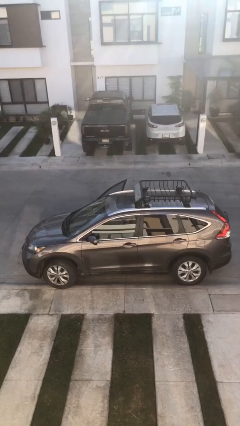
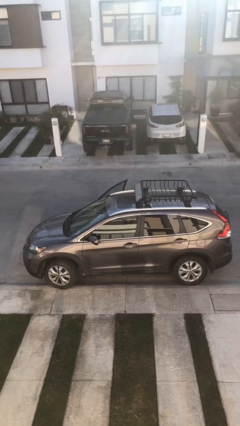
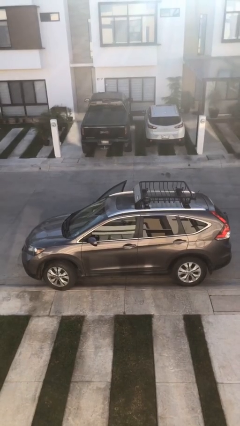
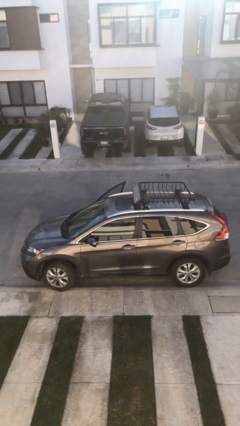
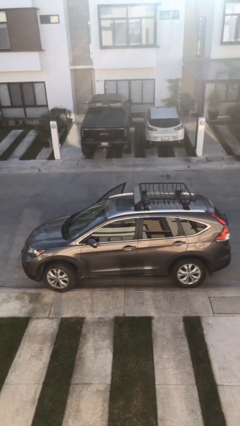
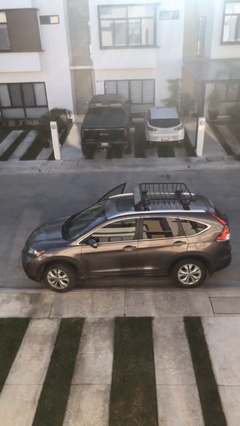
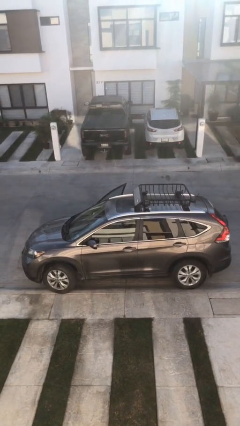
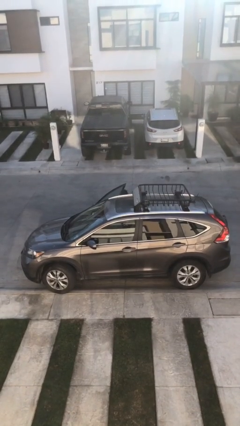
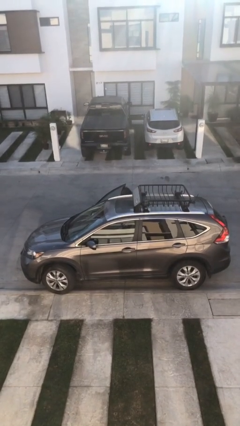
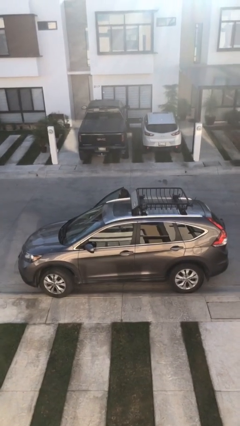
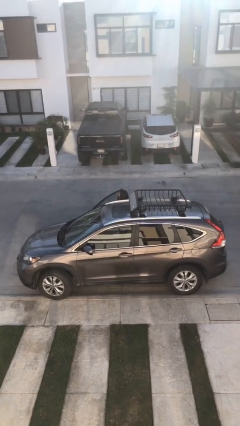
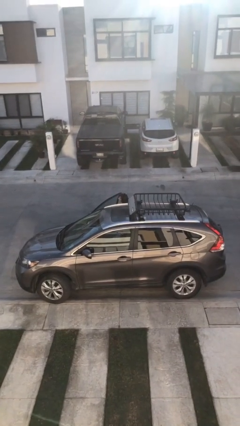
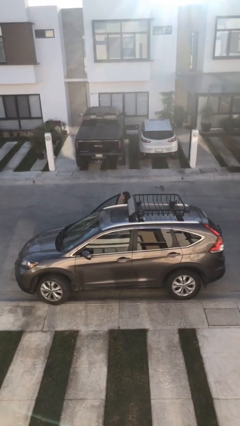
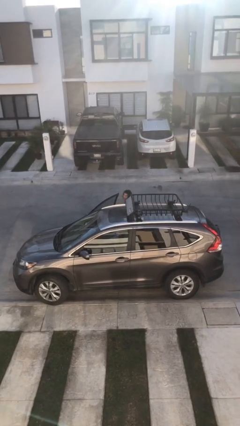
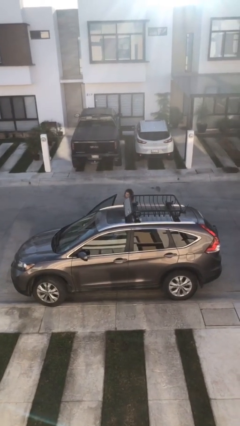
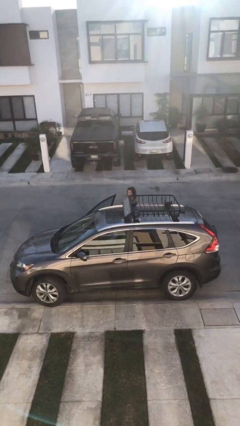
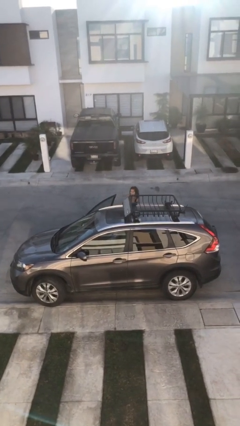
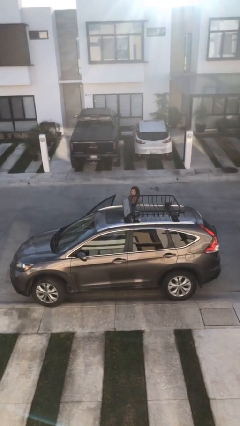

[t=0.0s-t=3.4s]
person exits car

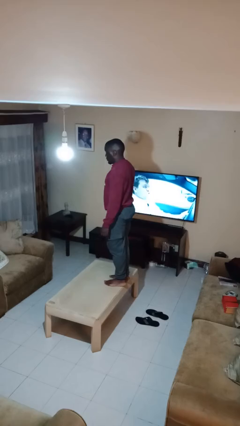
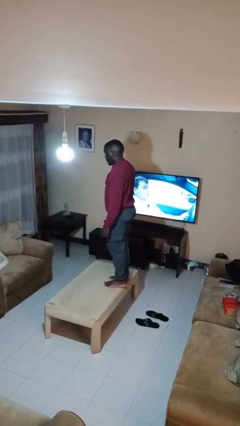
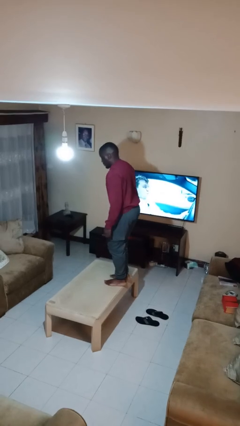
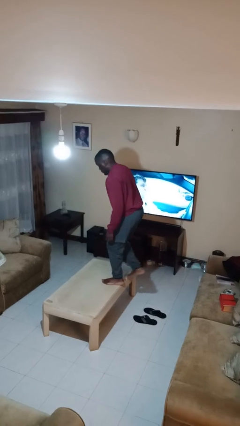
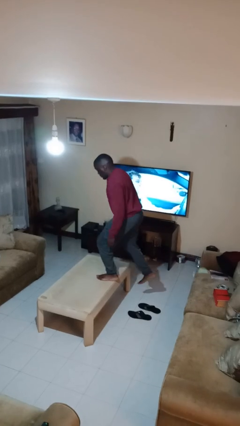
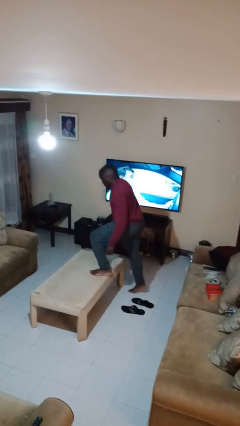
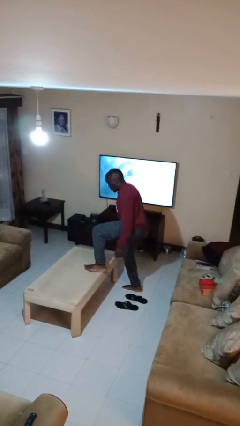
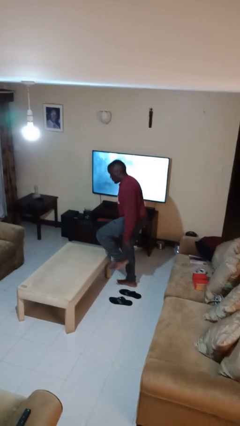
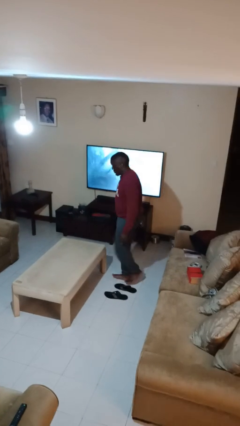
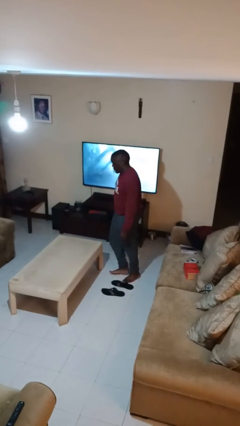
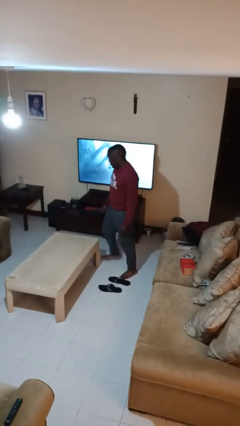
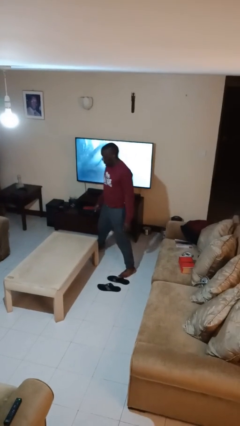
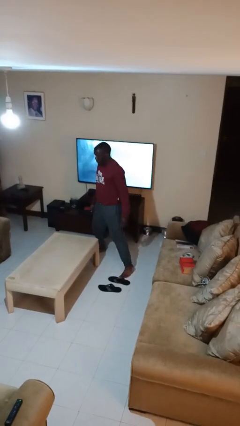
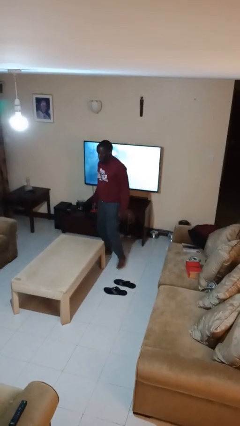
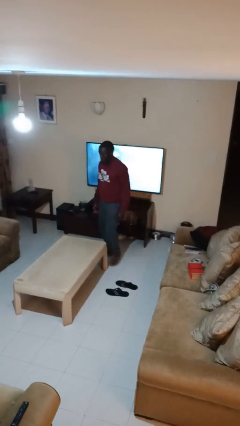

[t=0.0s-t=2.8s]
person climbs off table

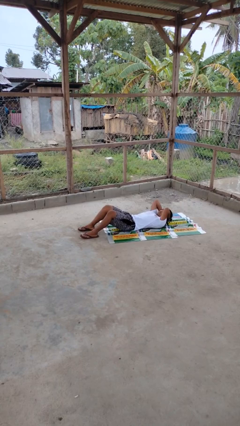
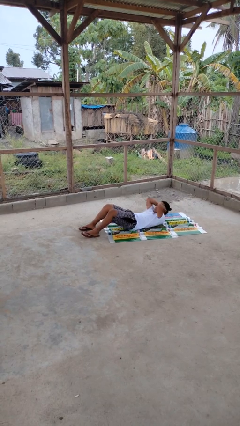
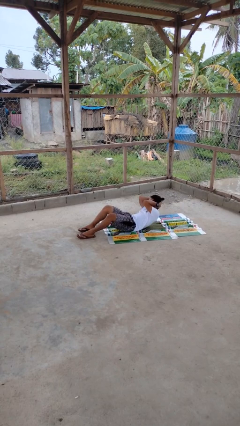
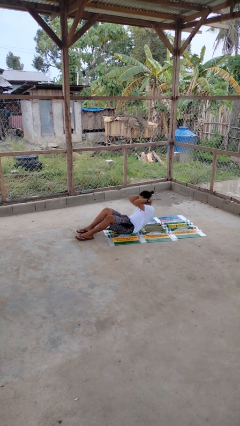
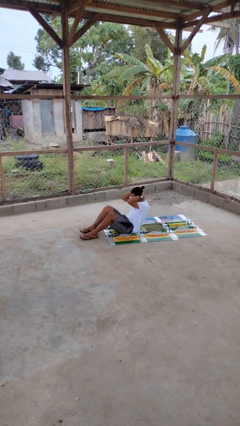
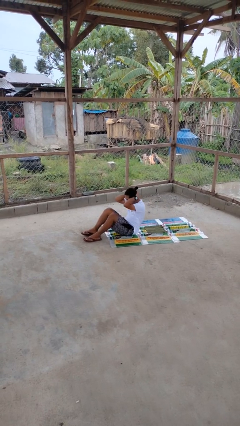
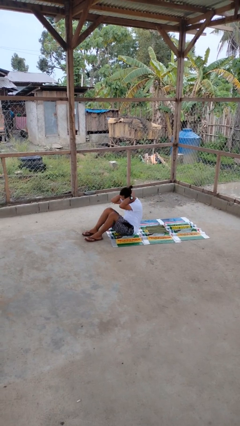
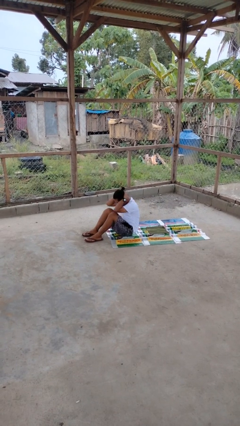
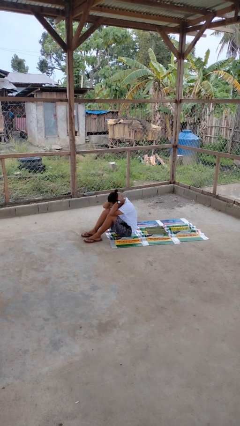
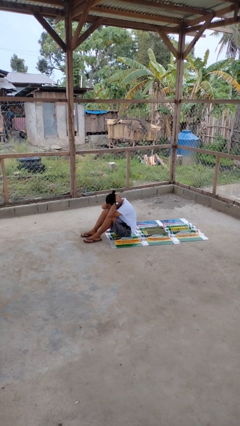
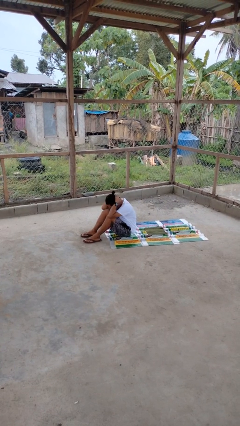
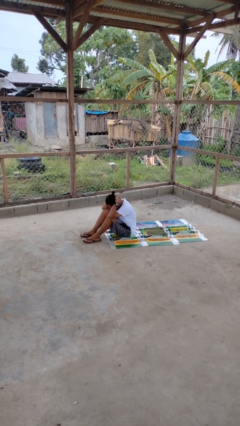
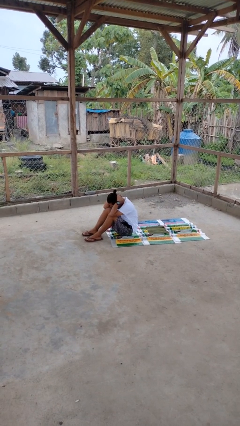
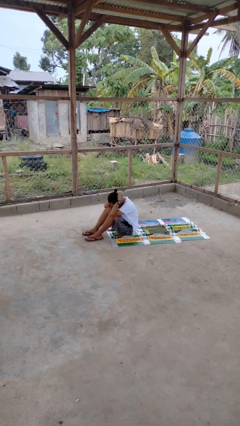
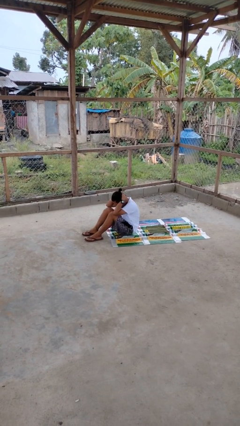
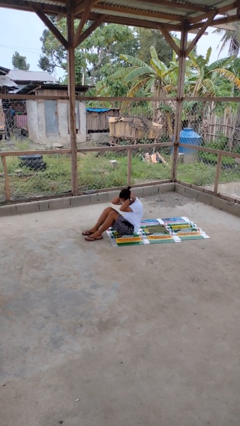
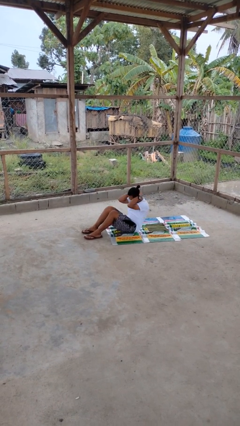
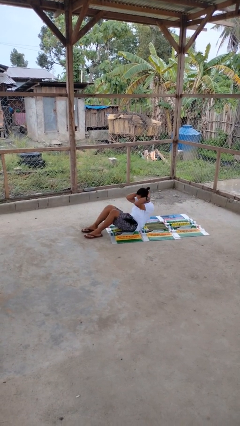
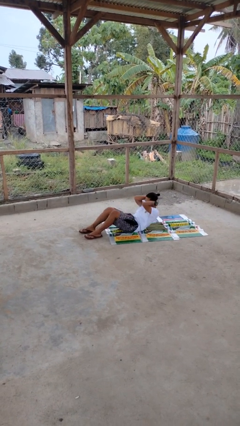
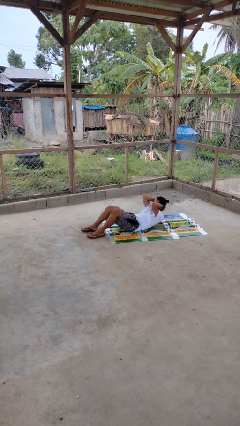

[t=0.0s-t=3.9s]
person exercises with situp

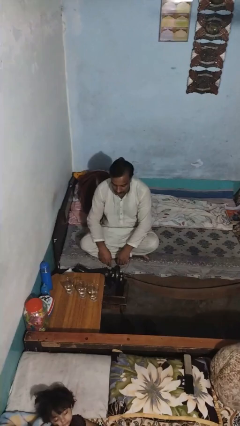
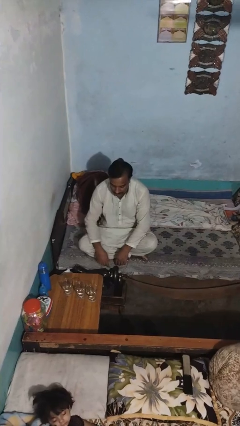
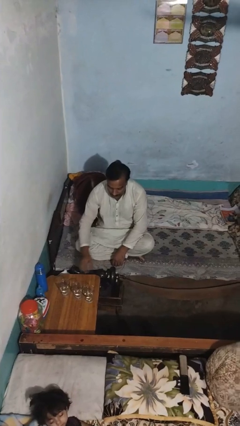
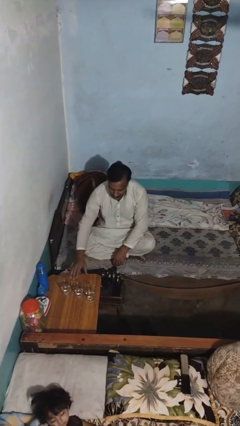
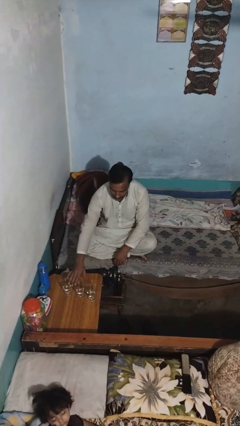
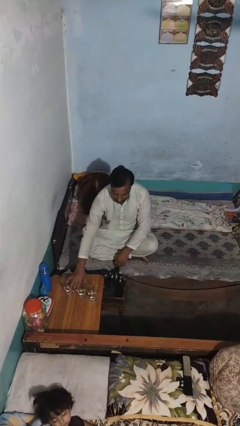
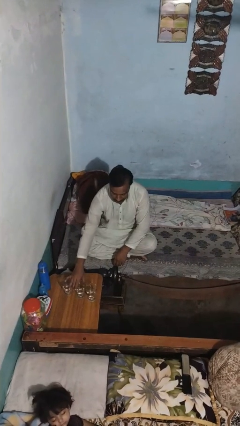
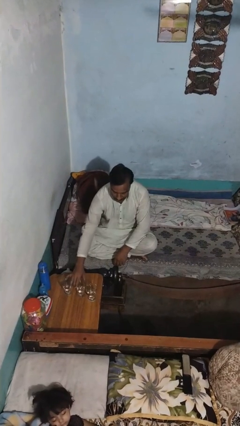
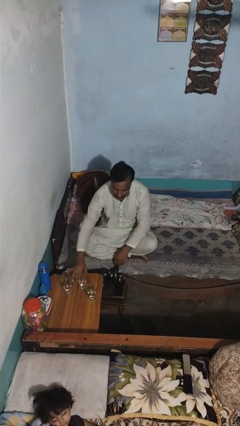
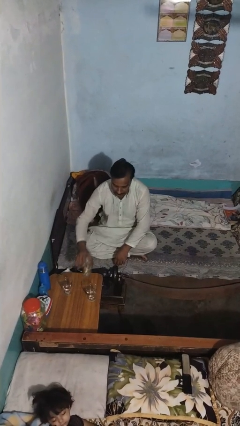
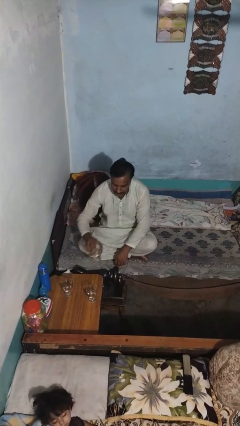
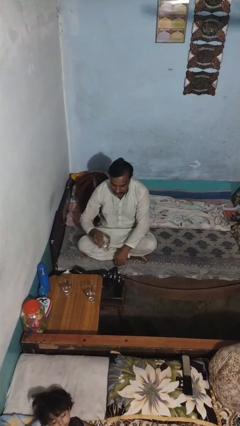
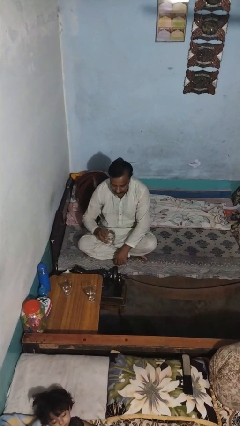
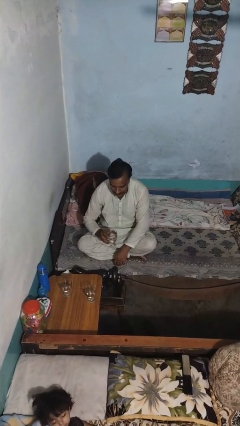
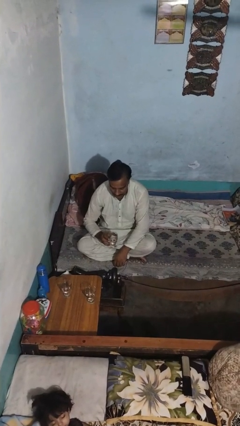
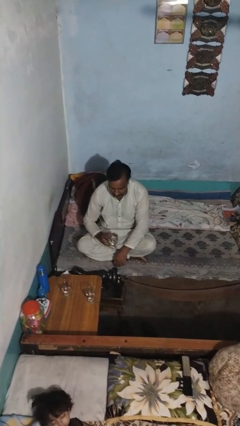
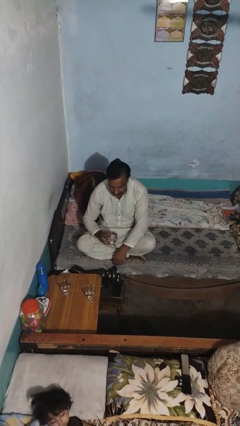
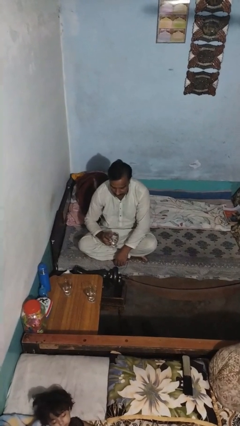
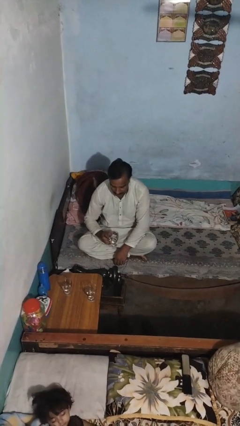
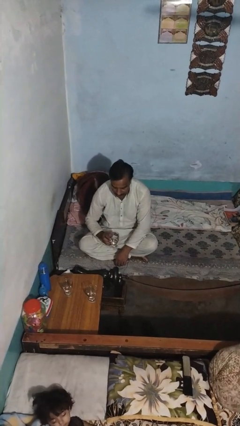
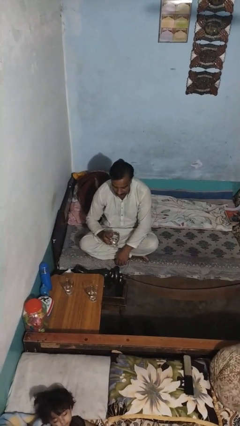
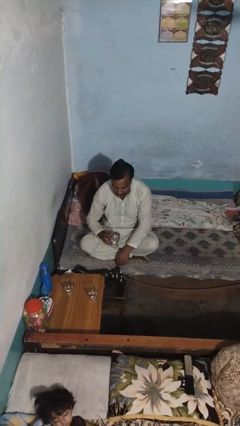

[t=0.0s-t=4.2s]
person picks up object from table

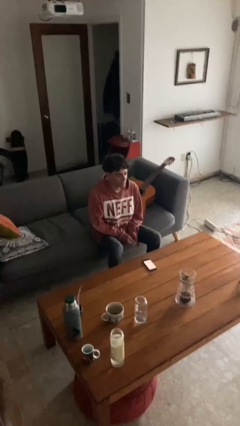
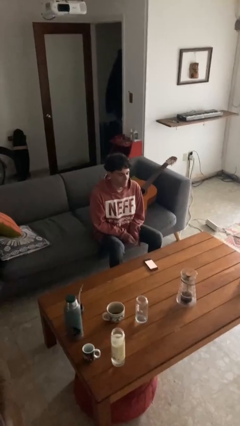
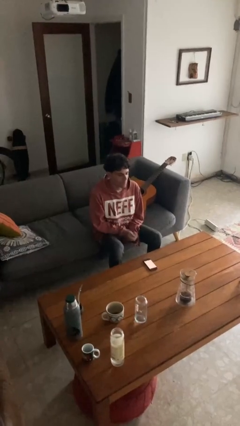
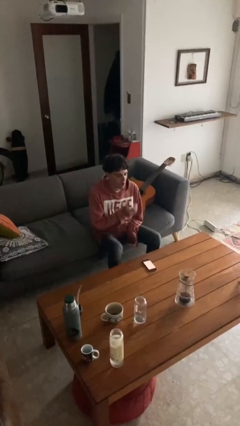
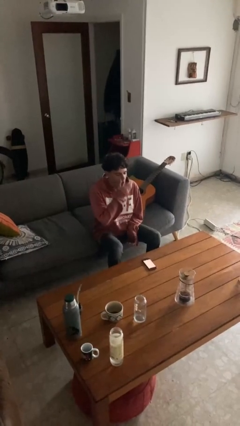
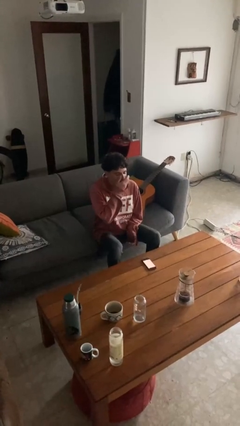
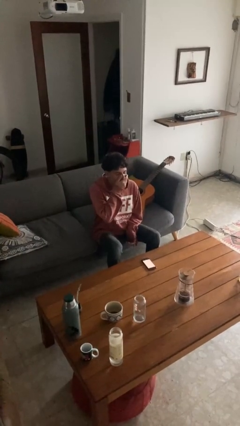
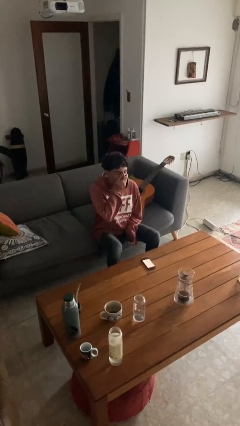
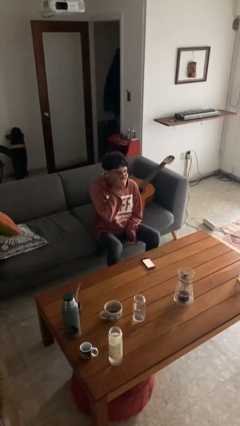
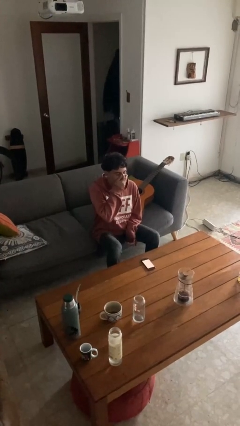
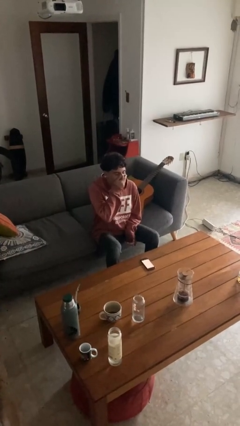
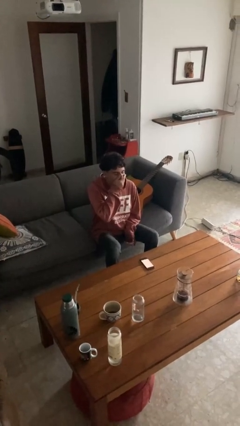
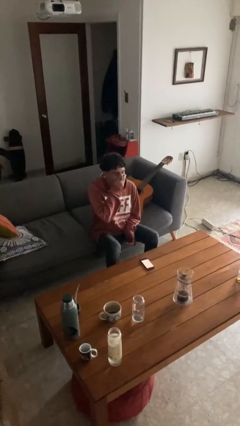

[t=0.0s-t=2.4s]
person yawns

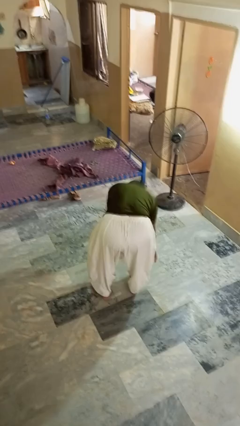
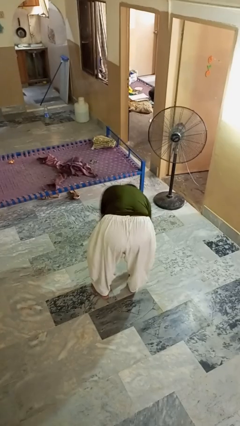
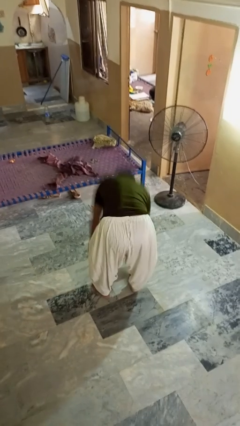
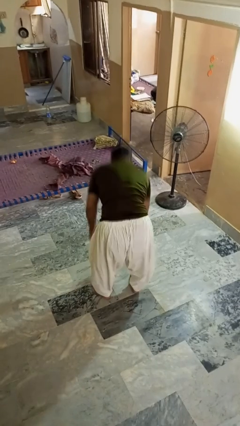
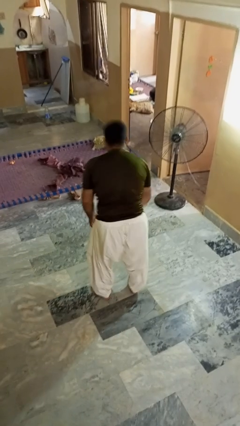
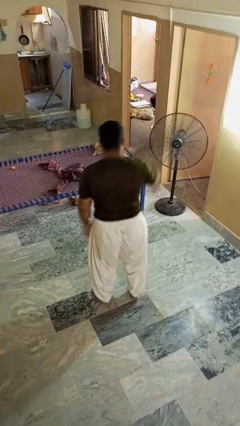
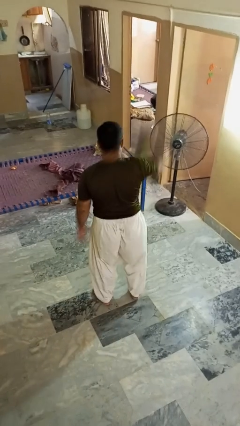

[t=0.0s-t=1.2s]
person picks up object from floor
